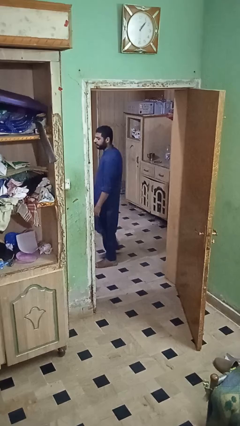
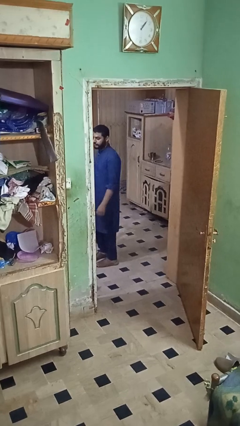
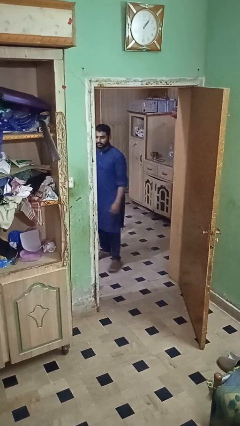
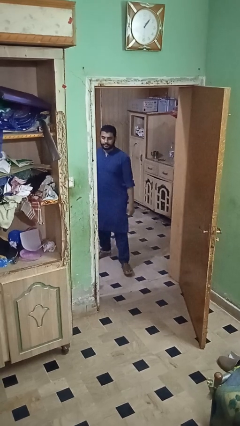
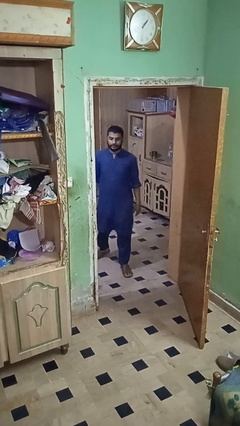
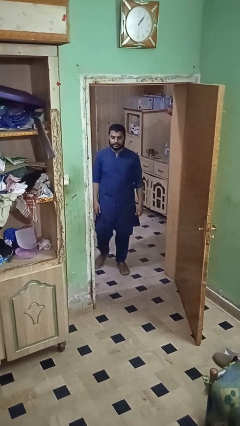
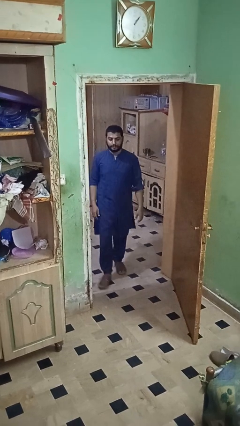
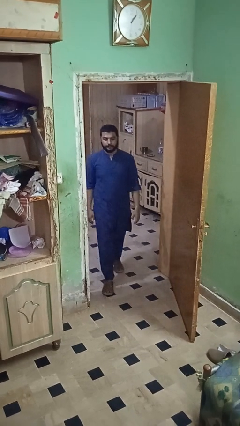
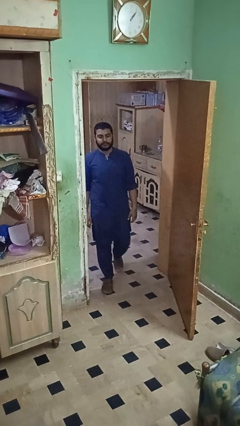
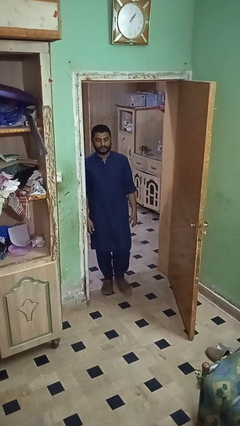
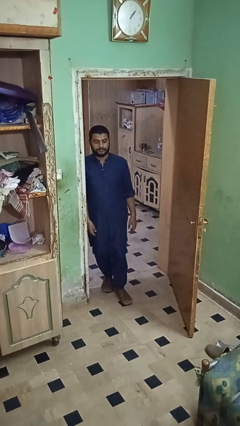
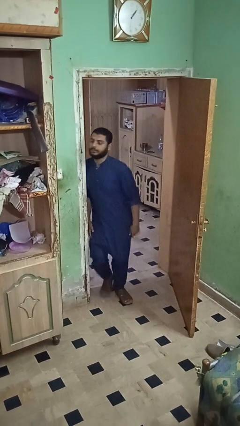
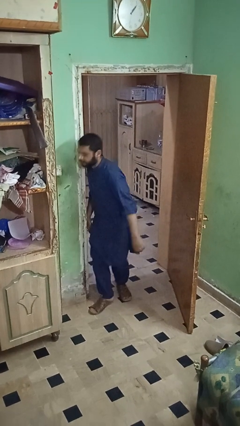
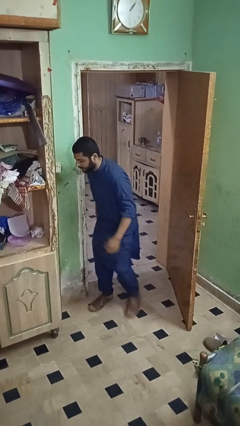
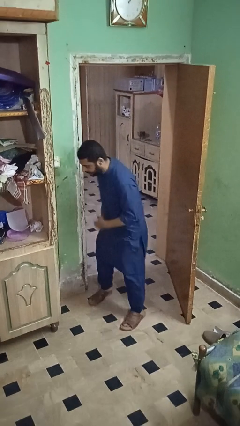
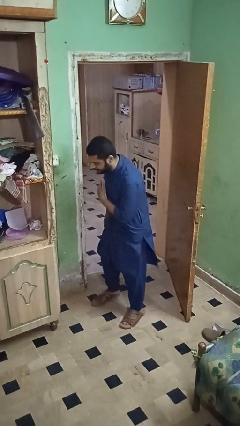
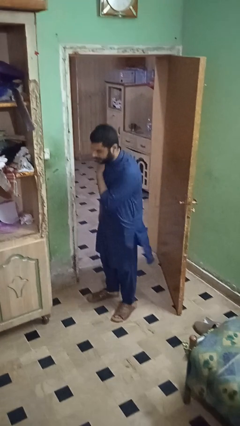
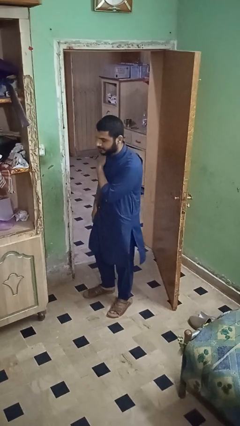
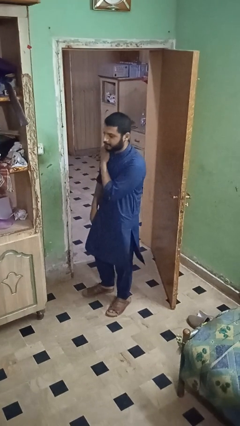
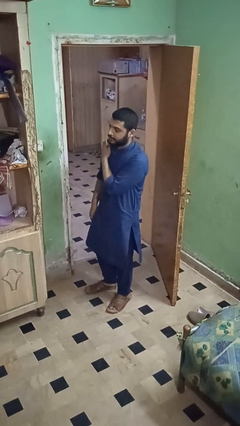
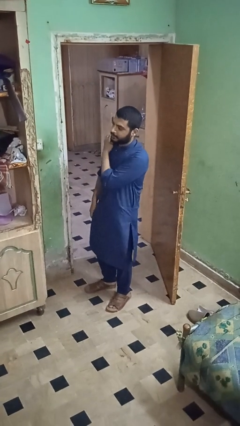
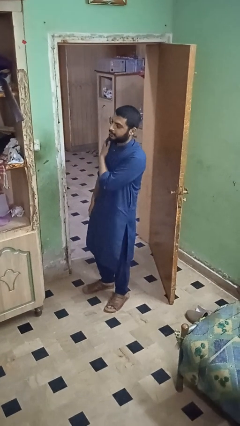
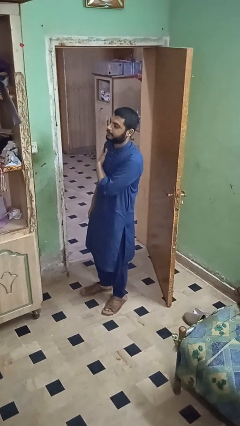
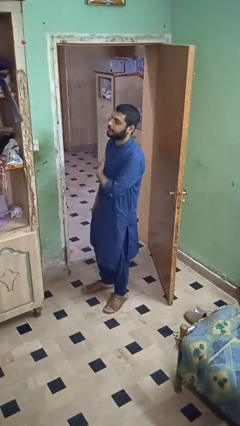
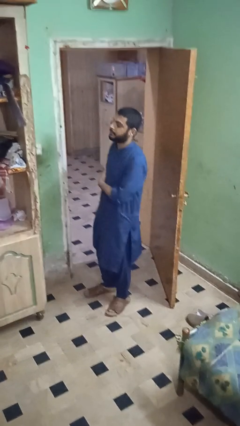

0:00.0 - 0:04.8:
person bumps into wall

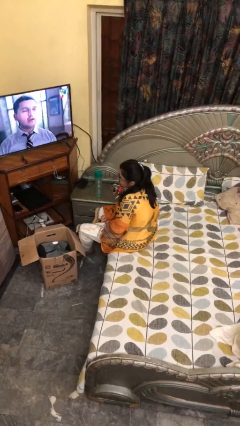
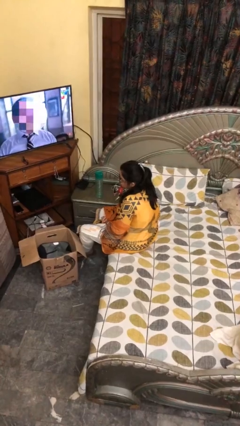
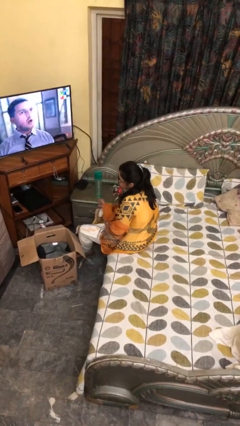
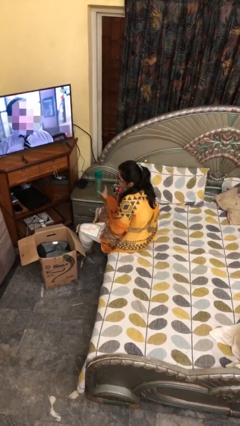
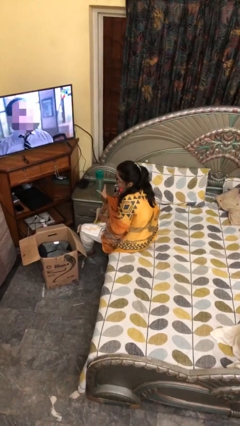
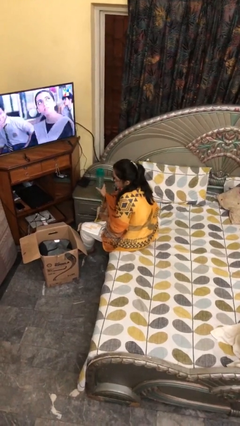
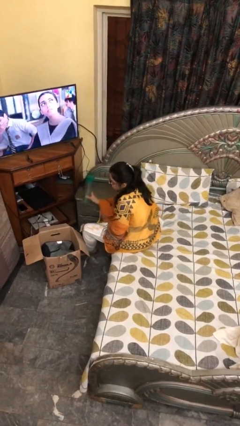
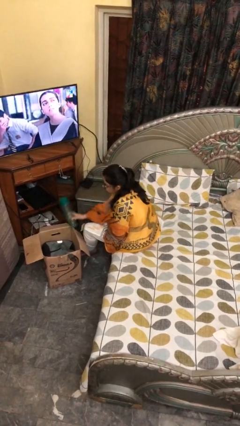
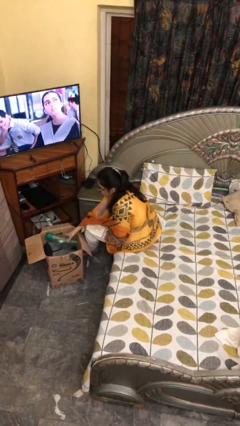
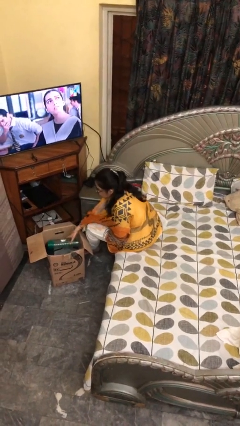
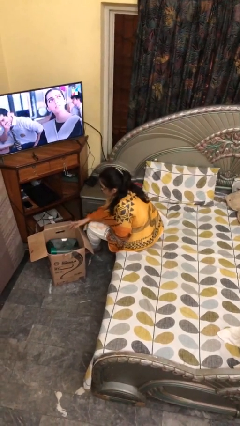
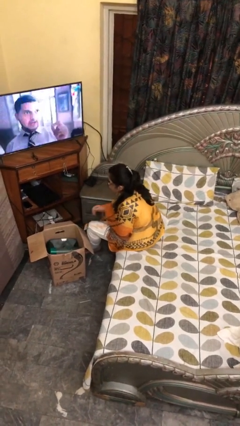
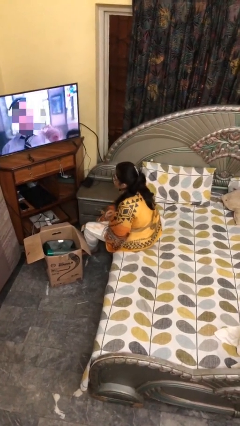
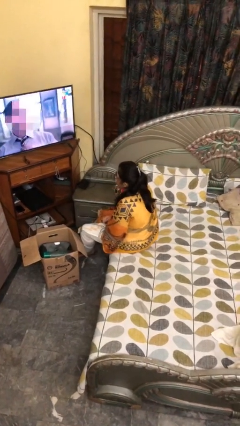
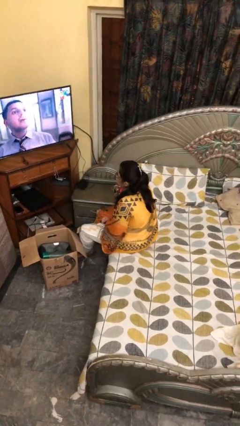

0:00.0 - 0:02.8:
person puts object into box

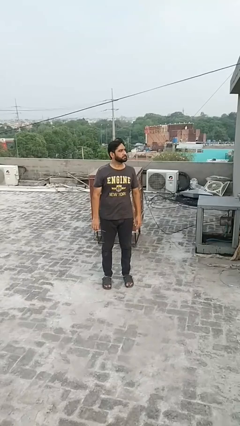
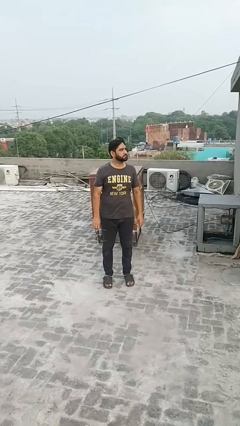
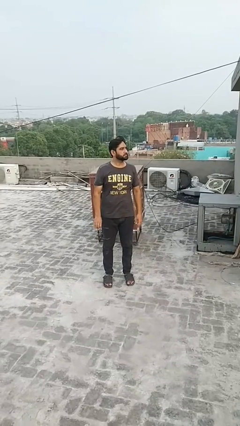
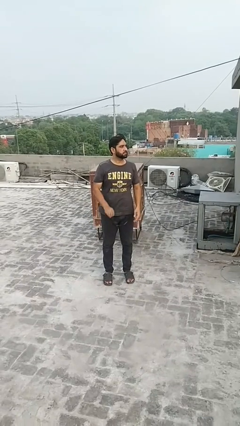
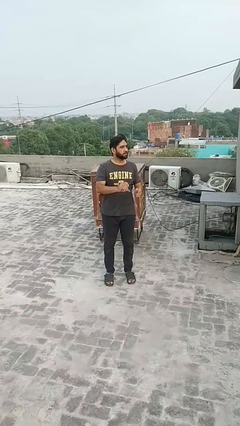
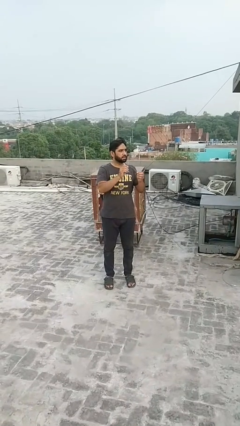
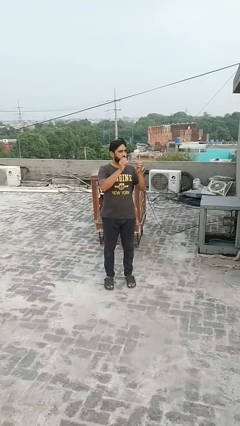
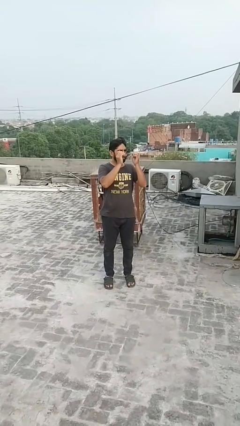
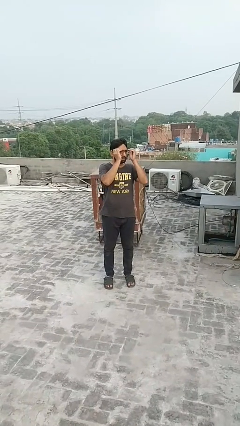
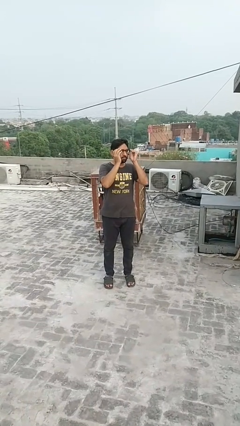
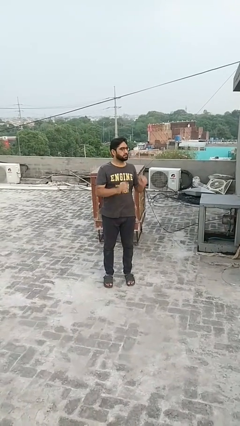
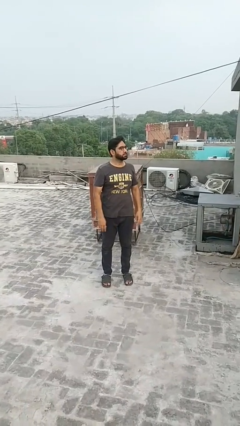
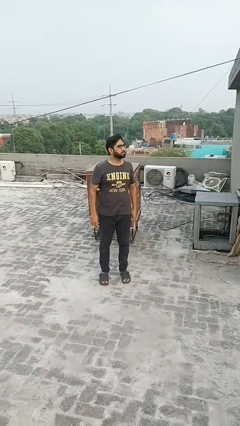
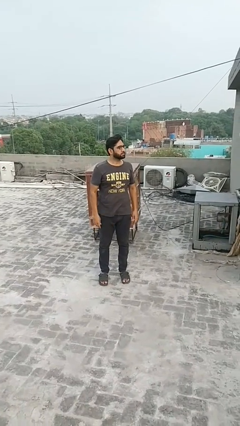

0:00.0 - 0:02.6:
person puts on glasses

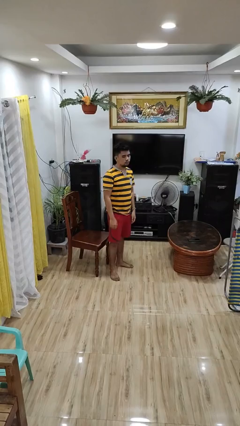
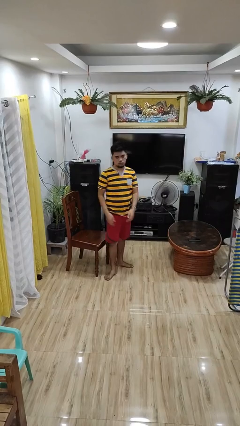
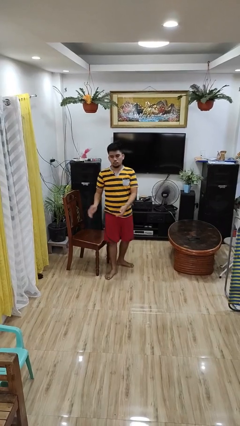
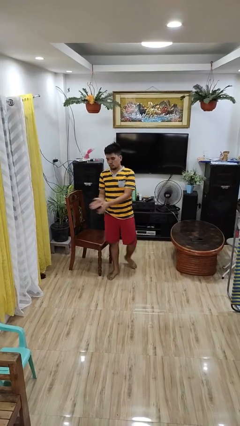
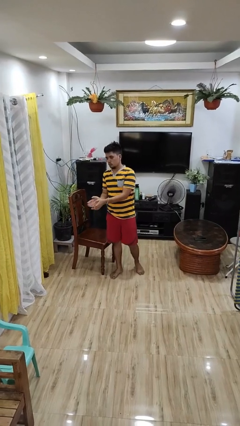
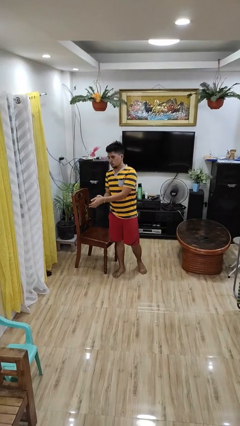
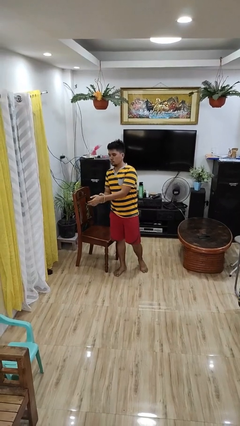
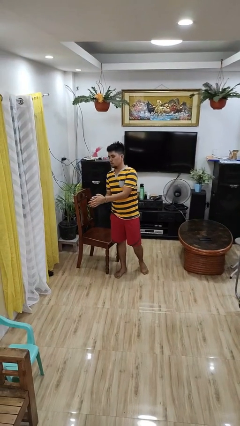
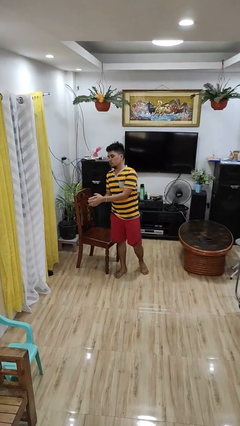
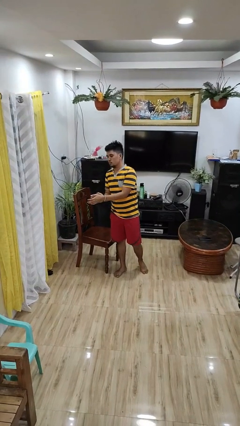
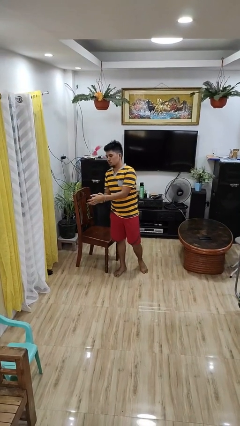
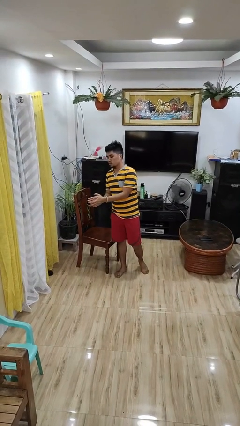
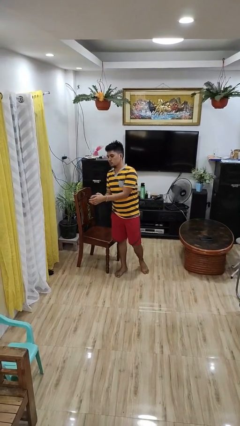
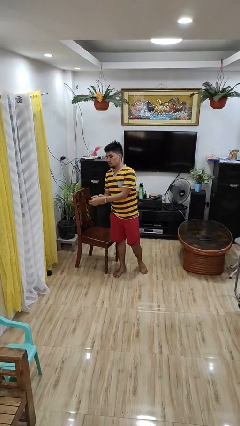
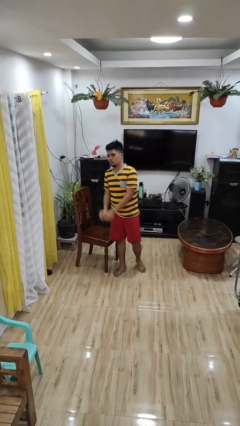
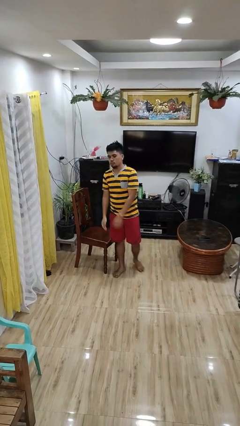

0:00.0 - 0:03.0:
person claps hands

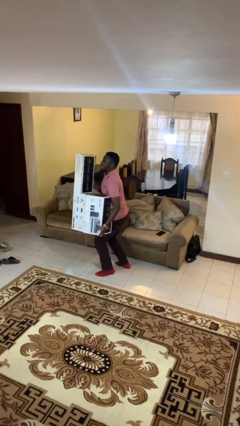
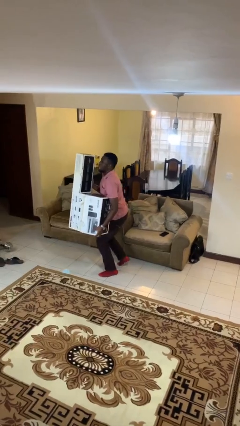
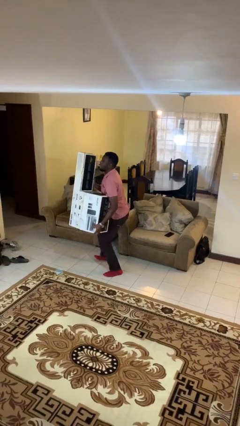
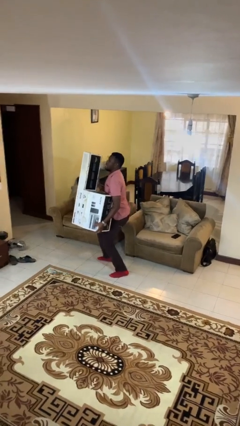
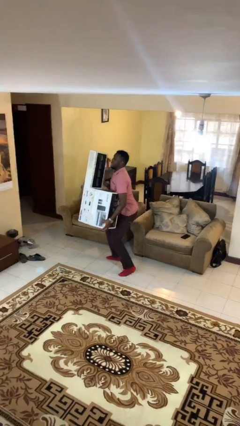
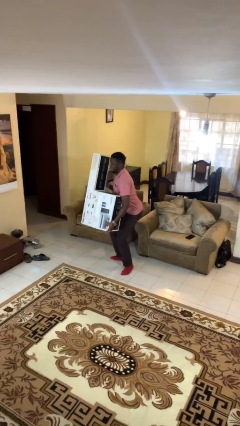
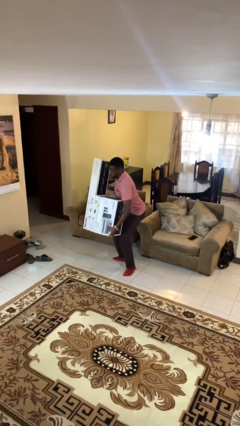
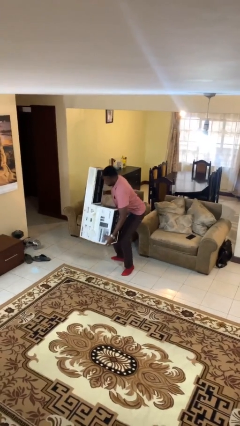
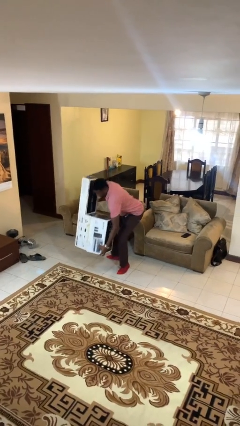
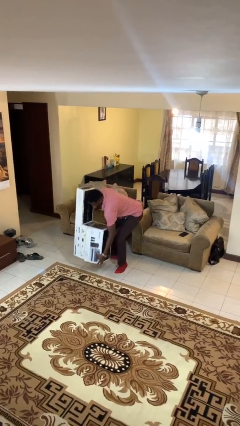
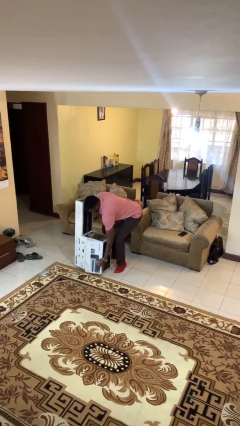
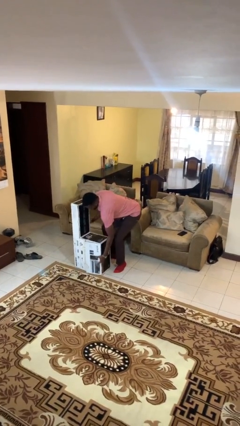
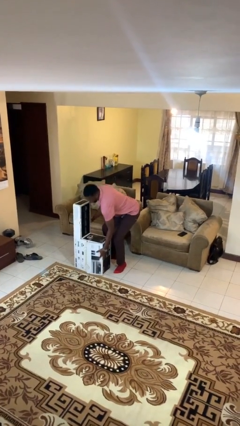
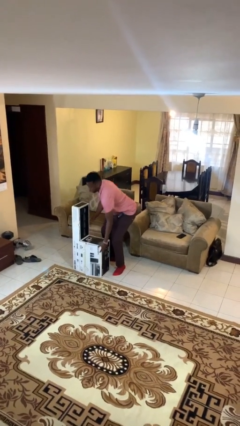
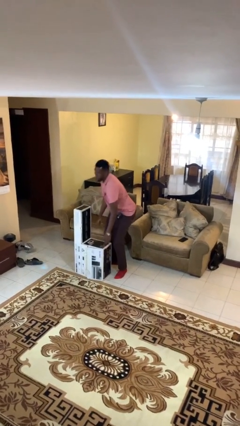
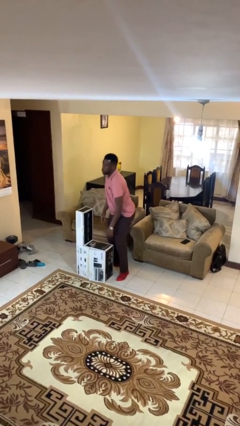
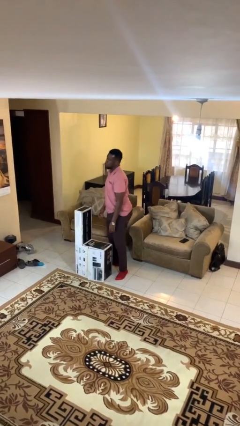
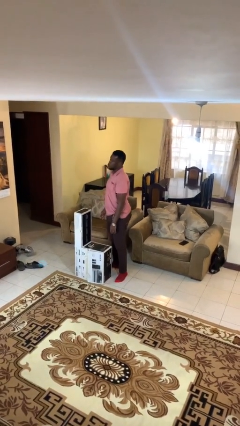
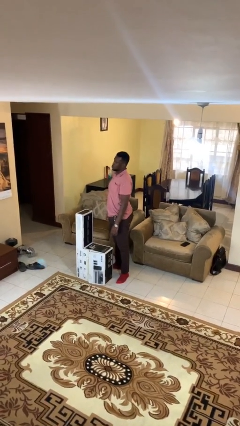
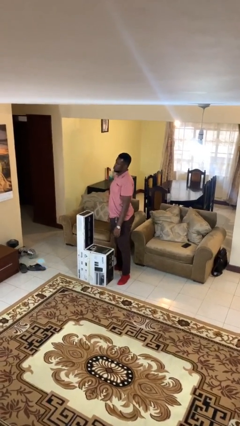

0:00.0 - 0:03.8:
person puts down object on floor

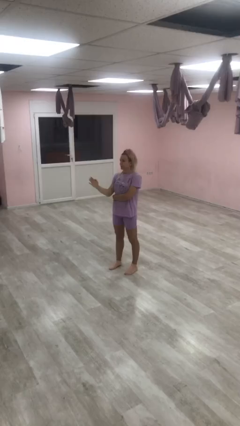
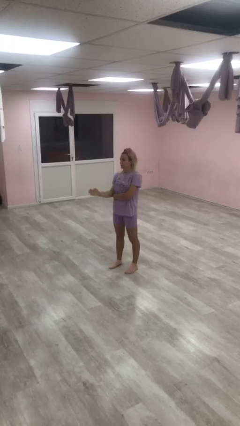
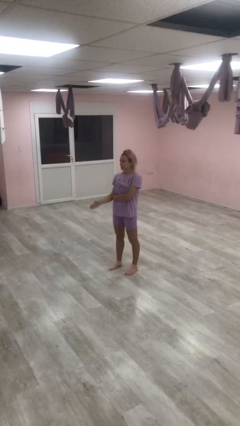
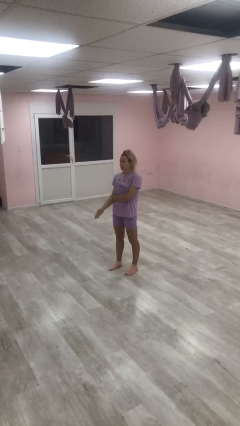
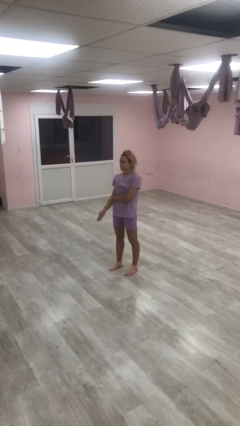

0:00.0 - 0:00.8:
person gestures lower hand
